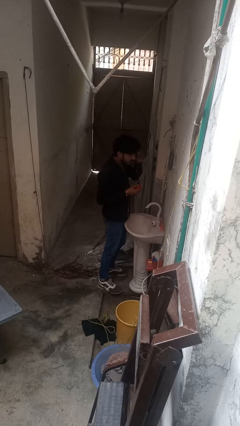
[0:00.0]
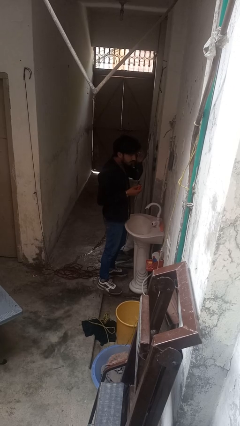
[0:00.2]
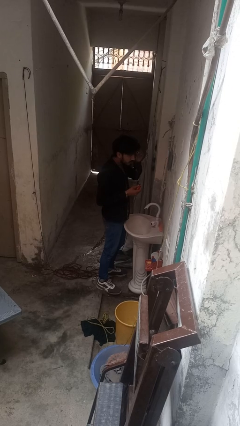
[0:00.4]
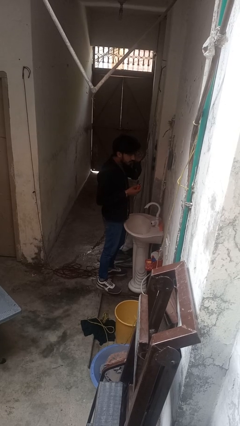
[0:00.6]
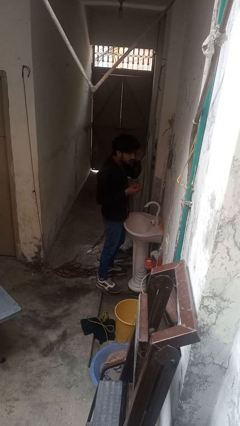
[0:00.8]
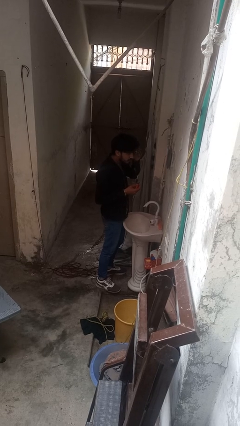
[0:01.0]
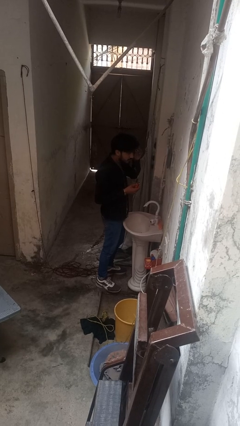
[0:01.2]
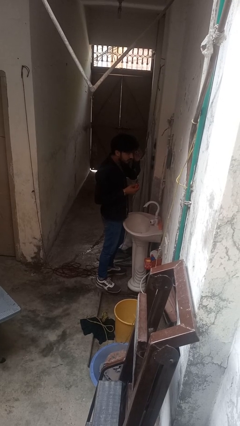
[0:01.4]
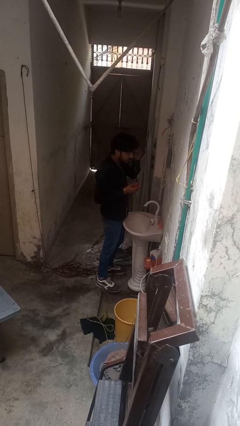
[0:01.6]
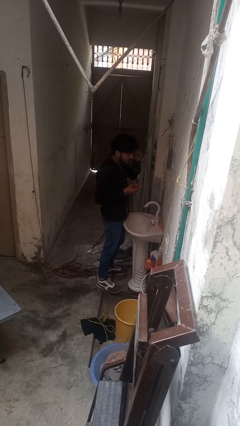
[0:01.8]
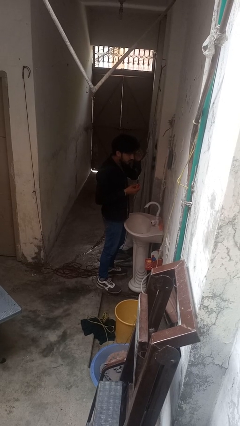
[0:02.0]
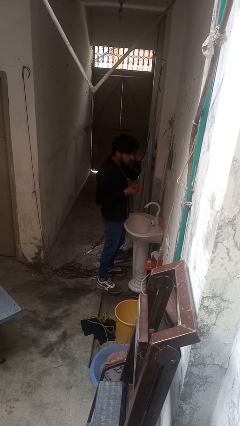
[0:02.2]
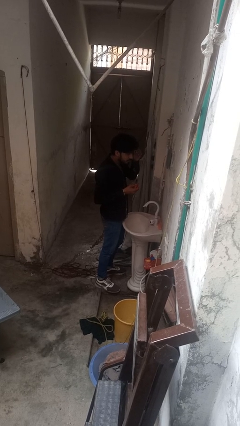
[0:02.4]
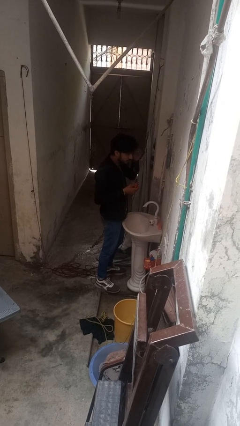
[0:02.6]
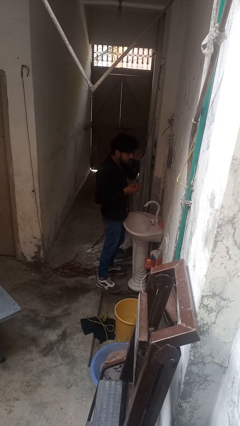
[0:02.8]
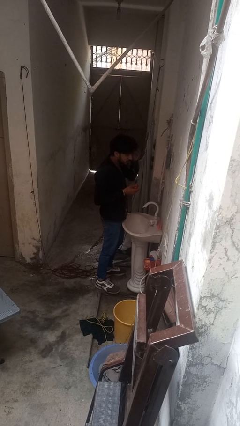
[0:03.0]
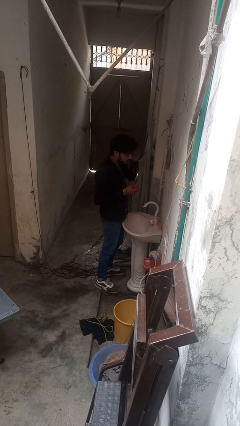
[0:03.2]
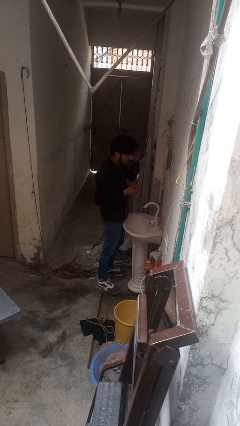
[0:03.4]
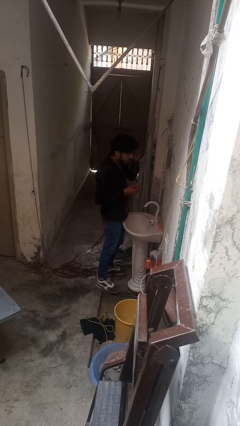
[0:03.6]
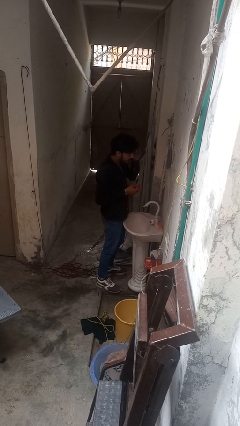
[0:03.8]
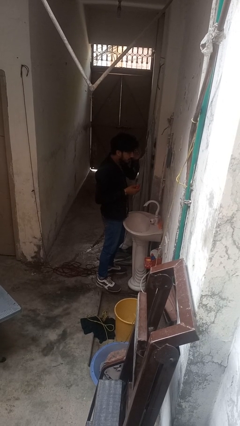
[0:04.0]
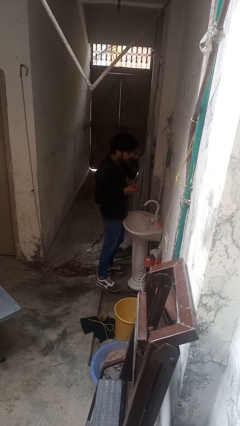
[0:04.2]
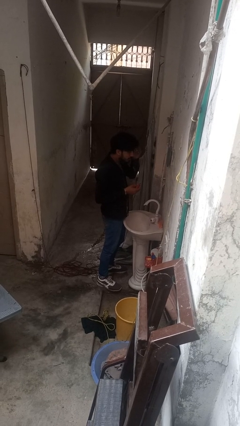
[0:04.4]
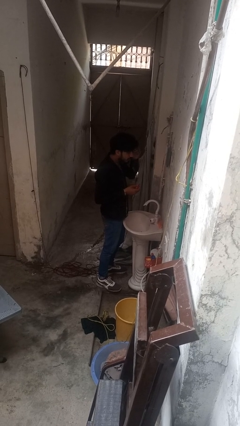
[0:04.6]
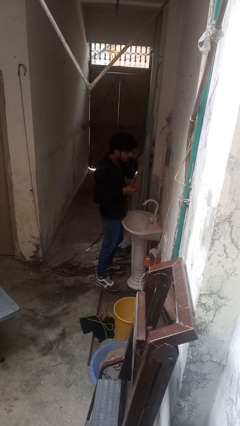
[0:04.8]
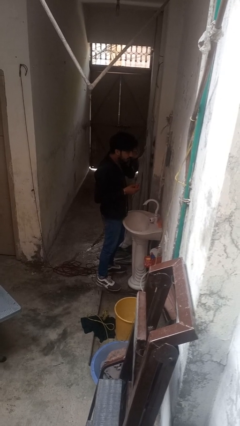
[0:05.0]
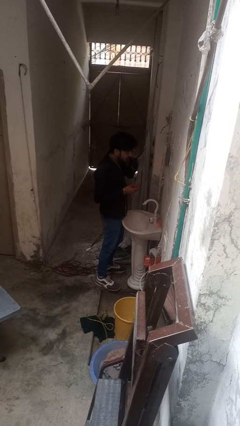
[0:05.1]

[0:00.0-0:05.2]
person applies eye makeup

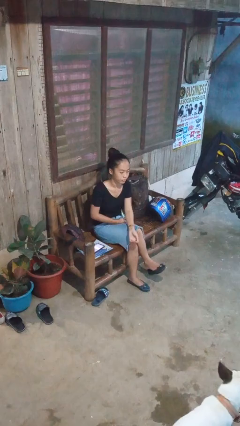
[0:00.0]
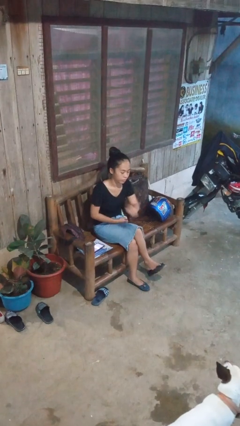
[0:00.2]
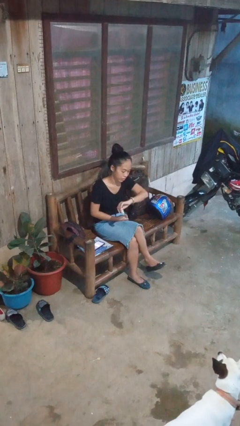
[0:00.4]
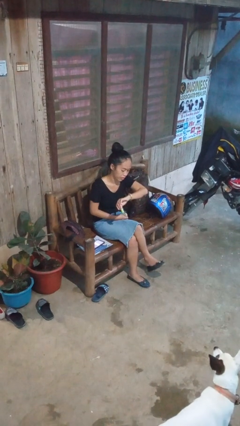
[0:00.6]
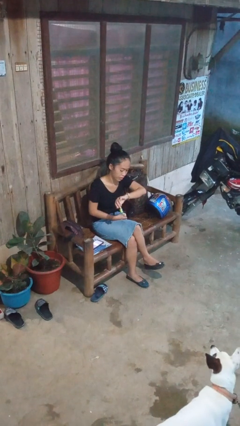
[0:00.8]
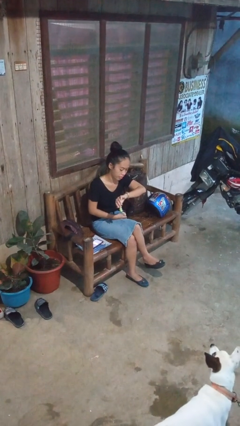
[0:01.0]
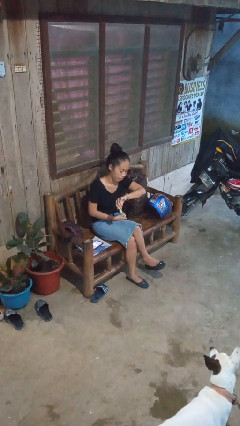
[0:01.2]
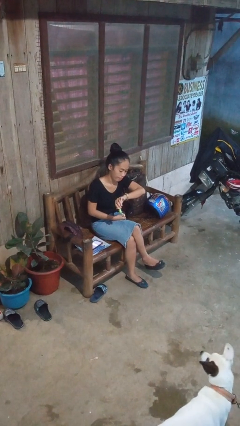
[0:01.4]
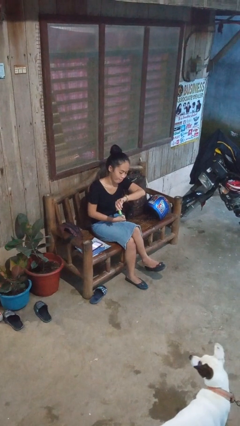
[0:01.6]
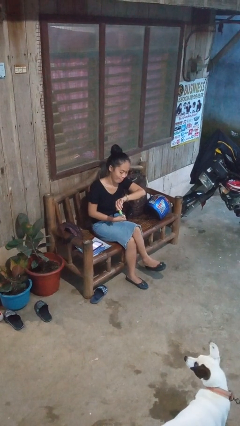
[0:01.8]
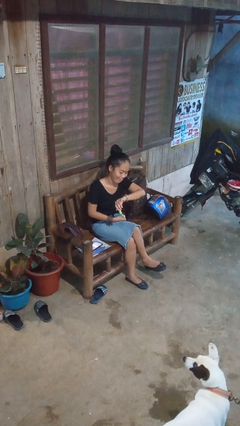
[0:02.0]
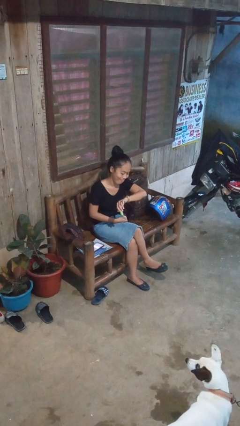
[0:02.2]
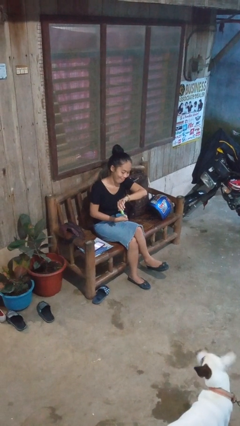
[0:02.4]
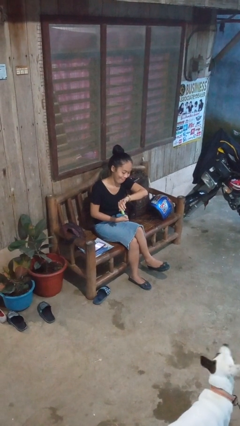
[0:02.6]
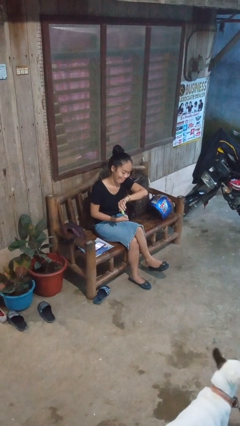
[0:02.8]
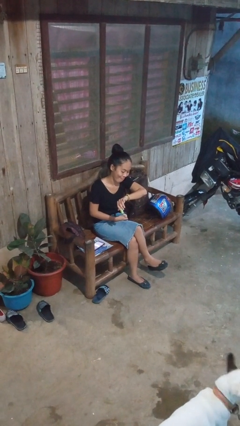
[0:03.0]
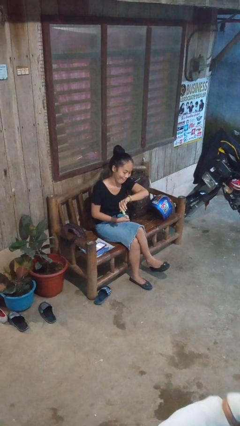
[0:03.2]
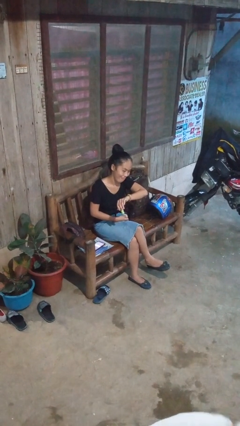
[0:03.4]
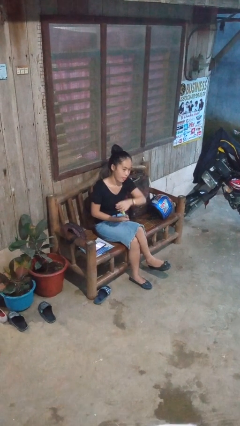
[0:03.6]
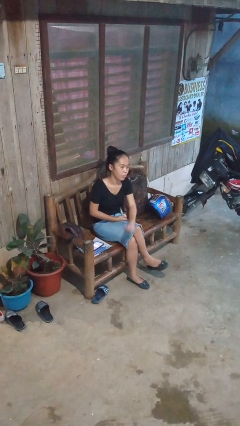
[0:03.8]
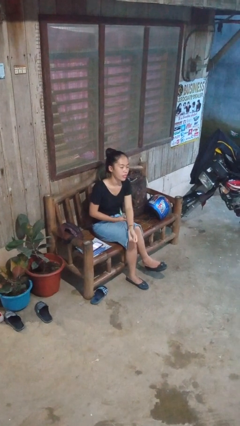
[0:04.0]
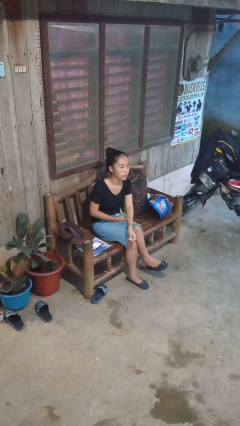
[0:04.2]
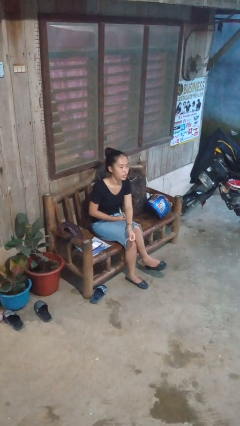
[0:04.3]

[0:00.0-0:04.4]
person looks at wristwatch

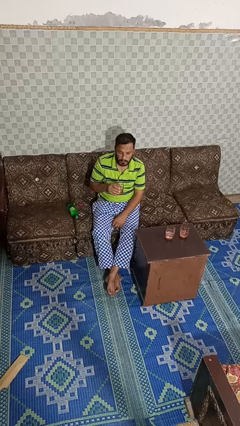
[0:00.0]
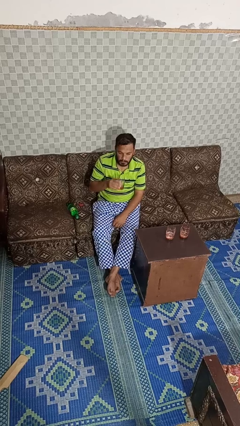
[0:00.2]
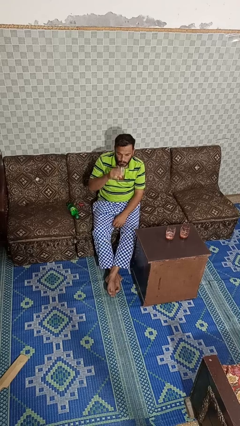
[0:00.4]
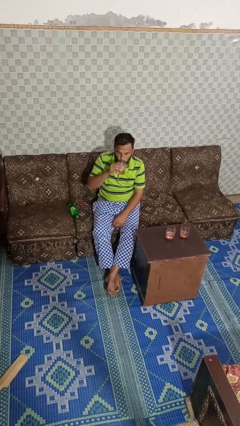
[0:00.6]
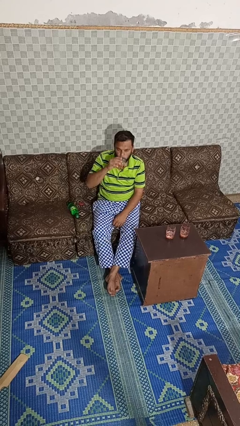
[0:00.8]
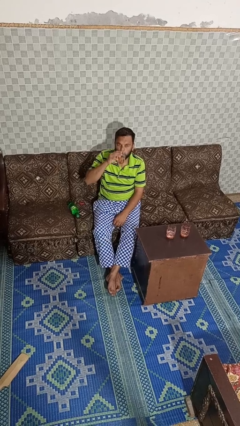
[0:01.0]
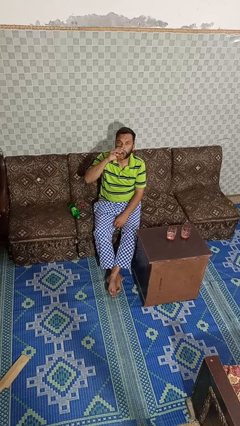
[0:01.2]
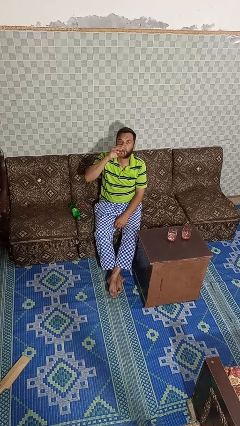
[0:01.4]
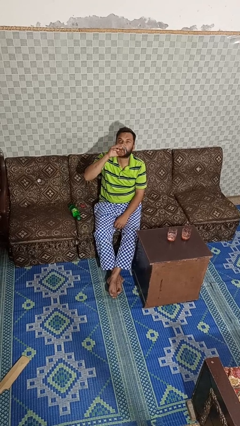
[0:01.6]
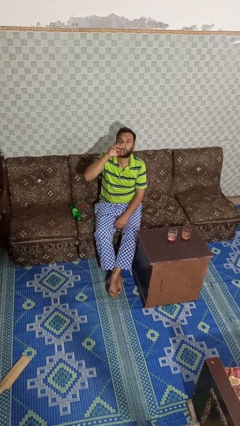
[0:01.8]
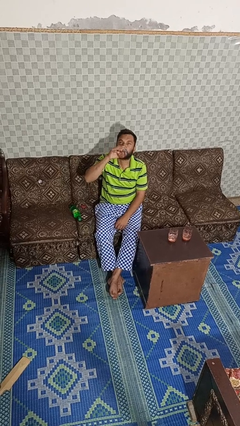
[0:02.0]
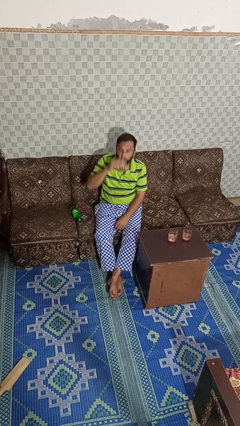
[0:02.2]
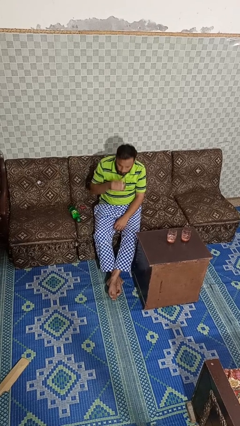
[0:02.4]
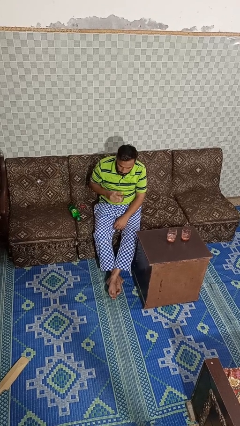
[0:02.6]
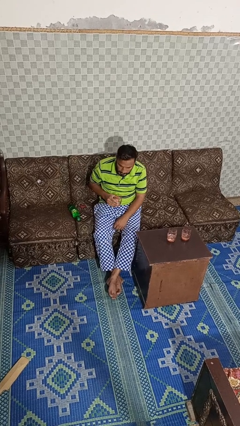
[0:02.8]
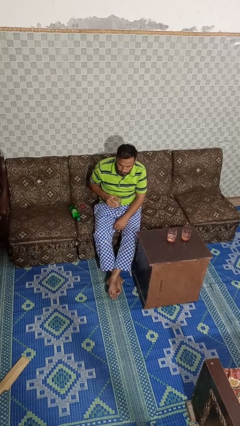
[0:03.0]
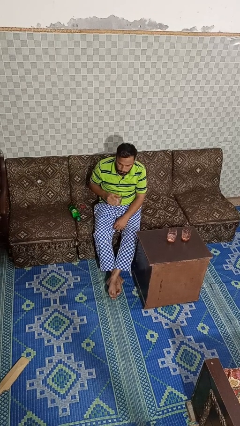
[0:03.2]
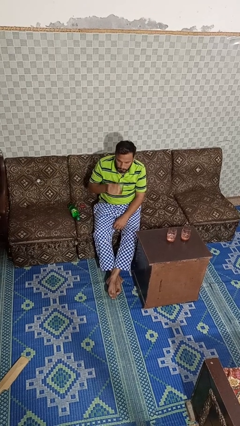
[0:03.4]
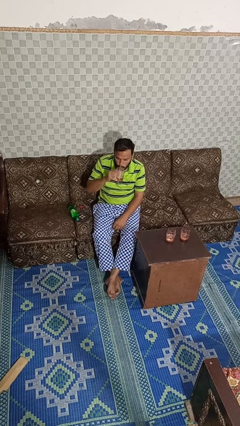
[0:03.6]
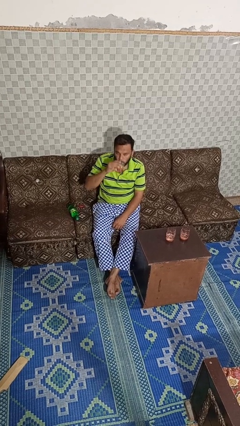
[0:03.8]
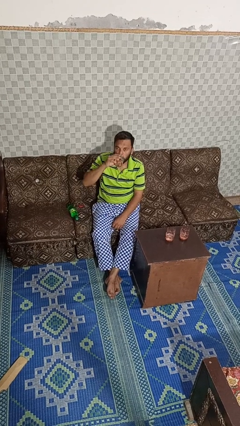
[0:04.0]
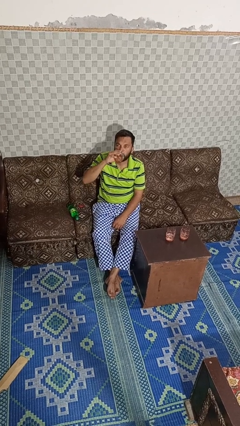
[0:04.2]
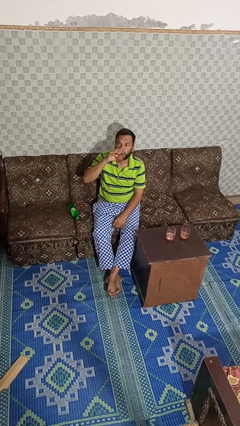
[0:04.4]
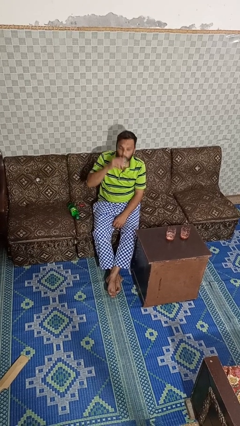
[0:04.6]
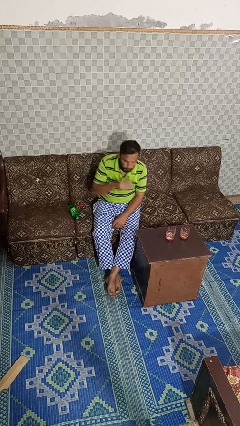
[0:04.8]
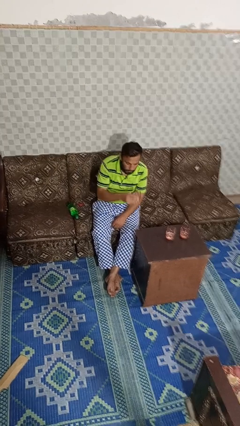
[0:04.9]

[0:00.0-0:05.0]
person drinks from shotglass

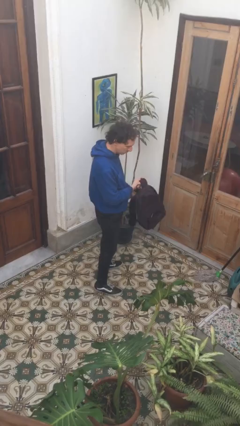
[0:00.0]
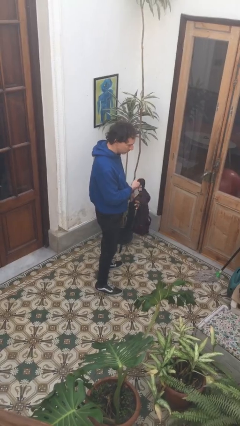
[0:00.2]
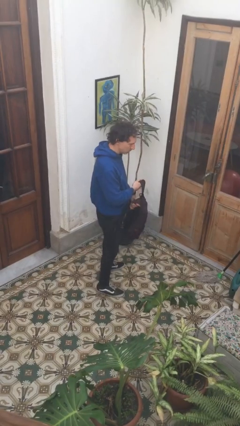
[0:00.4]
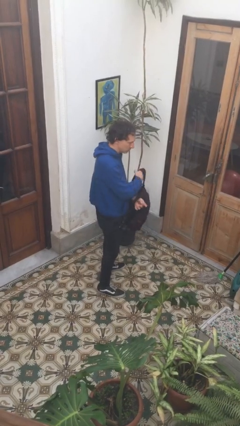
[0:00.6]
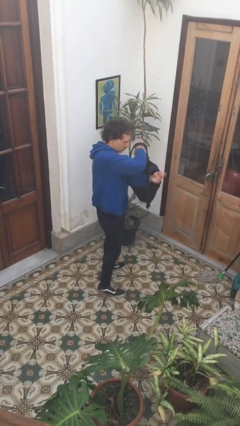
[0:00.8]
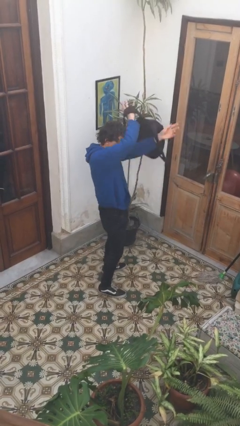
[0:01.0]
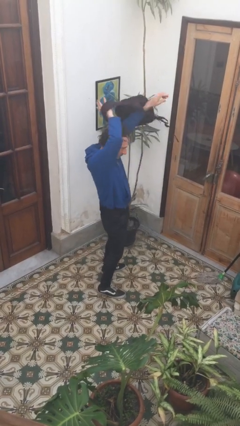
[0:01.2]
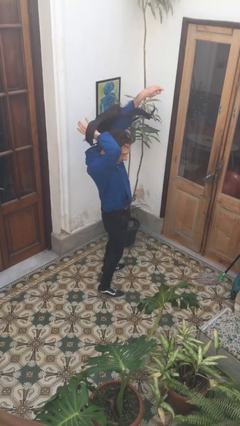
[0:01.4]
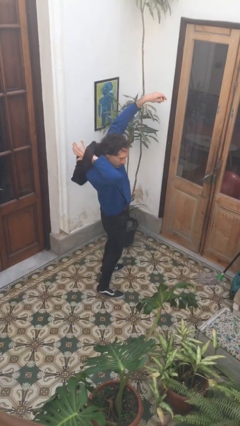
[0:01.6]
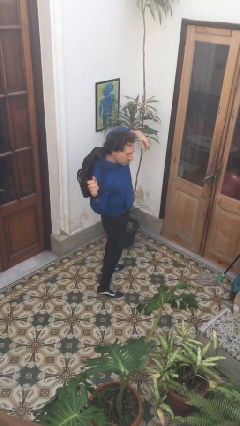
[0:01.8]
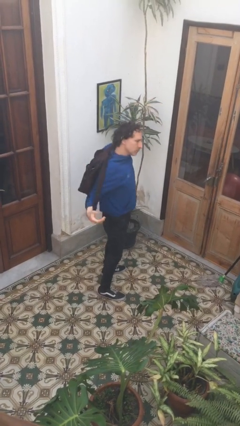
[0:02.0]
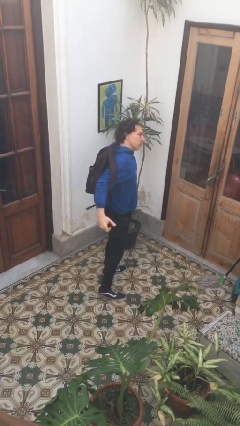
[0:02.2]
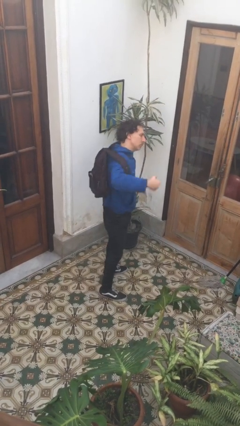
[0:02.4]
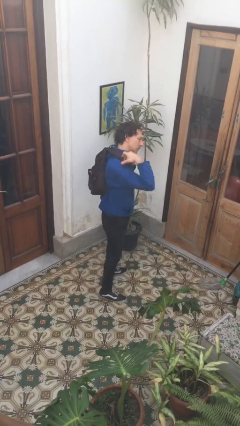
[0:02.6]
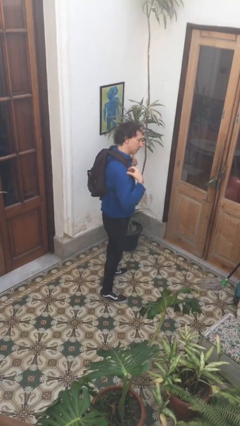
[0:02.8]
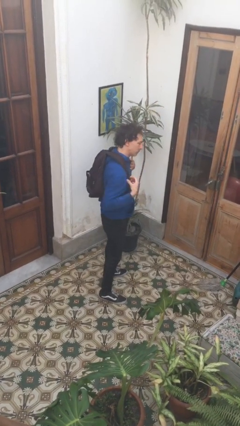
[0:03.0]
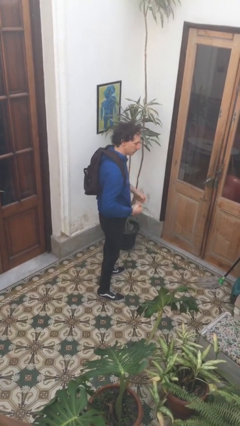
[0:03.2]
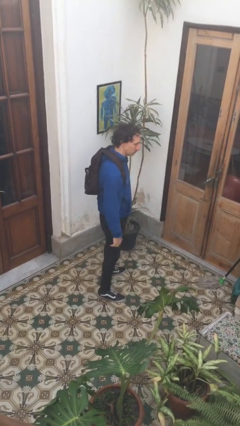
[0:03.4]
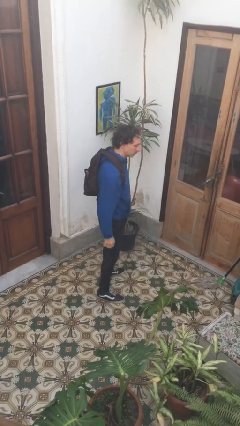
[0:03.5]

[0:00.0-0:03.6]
person puts on backpack
